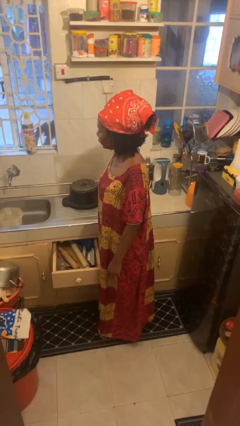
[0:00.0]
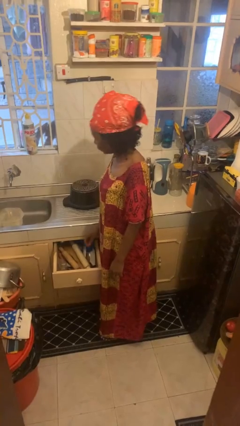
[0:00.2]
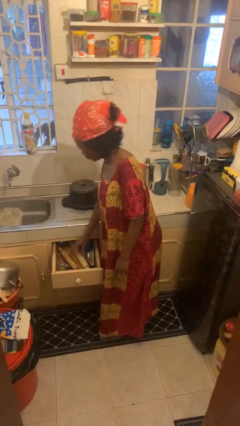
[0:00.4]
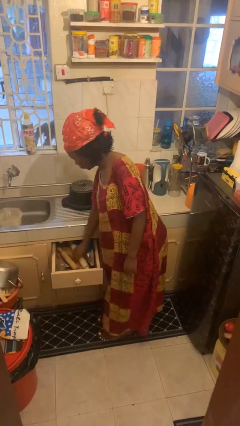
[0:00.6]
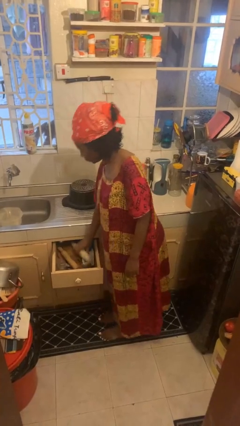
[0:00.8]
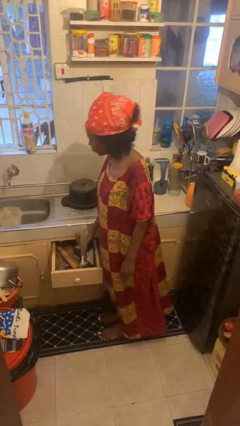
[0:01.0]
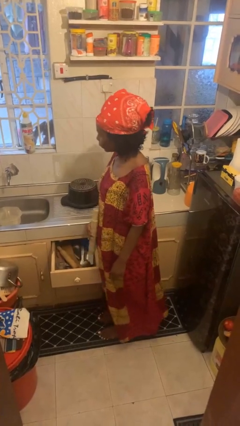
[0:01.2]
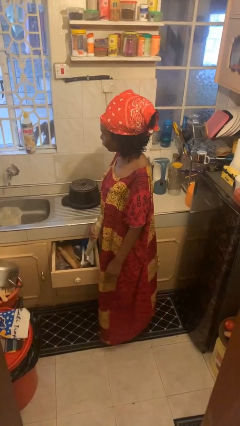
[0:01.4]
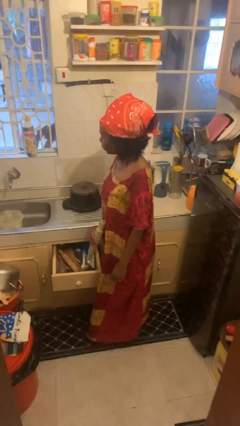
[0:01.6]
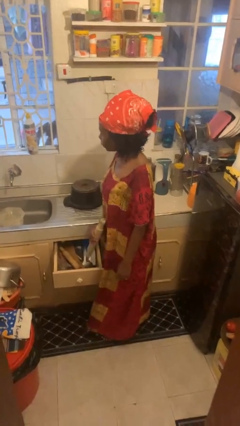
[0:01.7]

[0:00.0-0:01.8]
person takes object from kitchen drawer

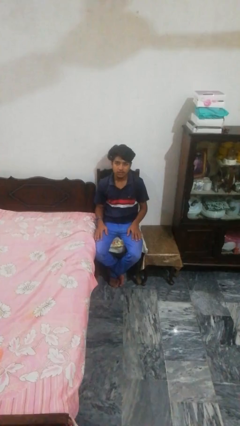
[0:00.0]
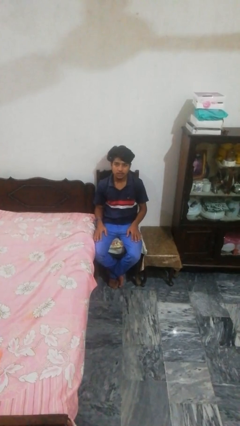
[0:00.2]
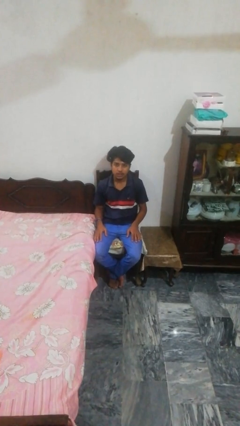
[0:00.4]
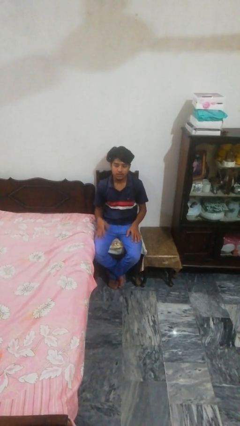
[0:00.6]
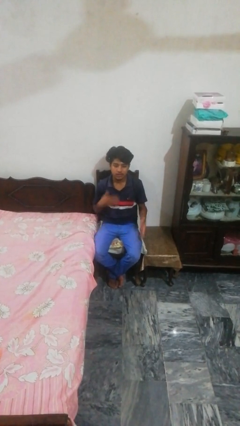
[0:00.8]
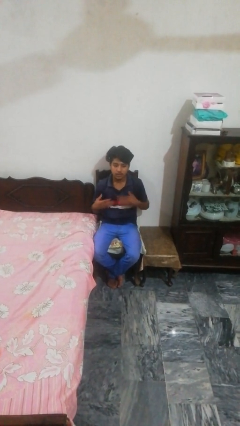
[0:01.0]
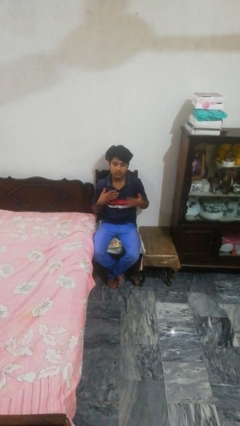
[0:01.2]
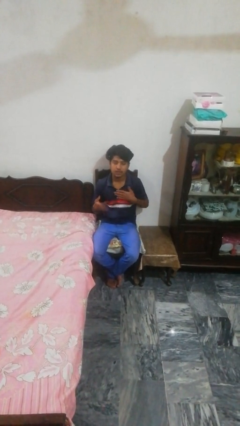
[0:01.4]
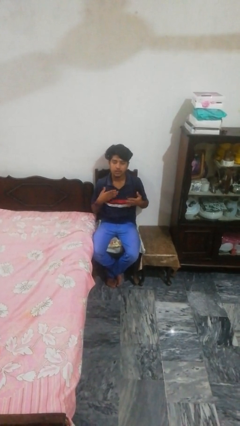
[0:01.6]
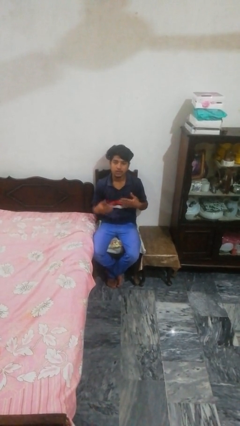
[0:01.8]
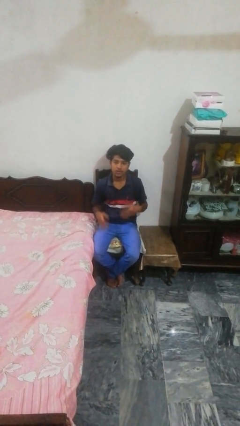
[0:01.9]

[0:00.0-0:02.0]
person drums on chest

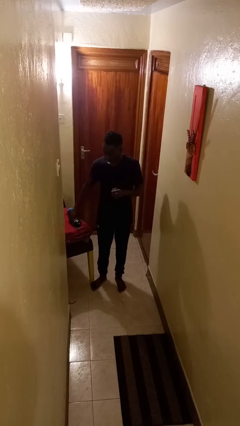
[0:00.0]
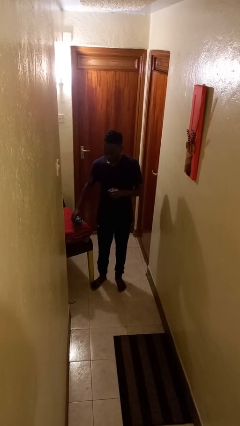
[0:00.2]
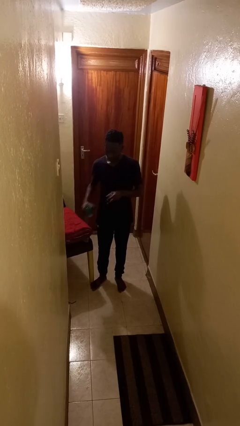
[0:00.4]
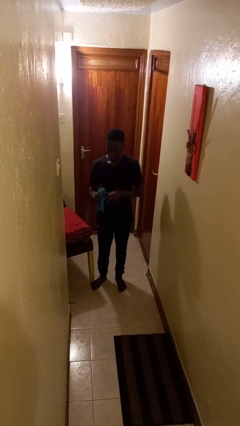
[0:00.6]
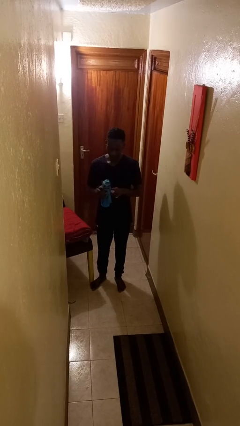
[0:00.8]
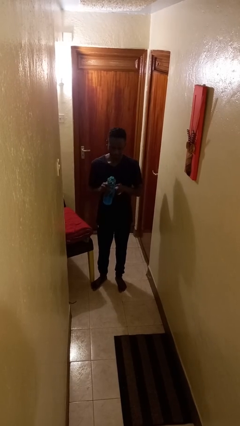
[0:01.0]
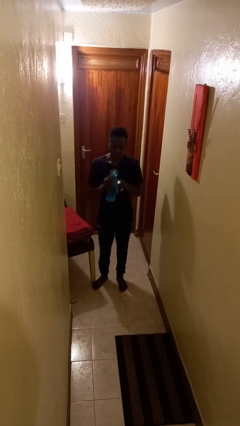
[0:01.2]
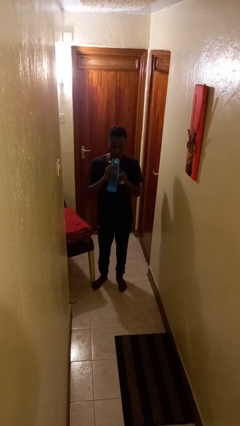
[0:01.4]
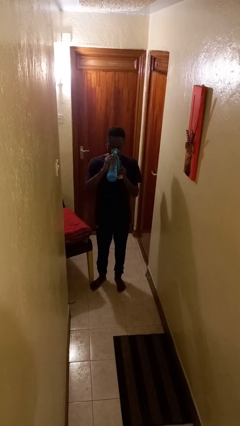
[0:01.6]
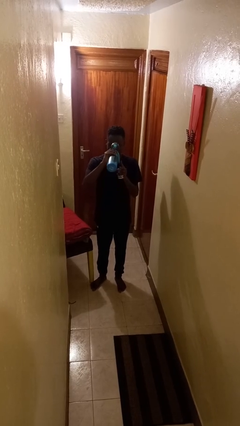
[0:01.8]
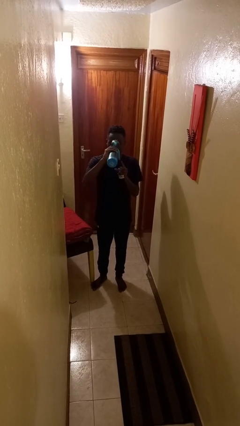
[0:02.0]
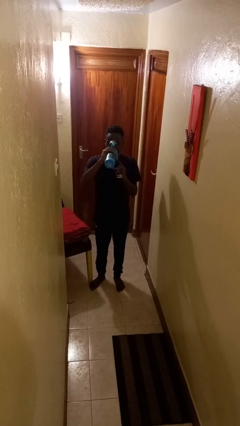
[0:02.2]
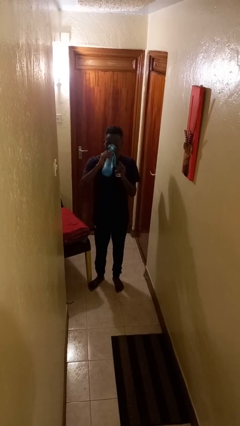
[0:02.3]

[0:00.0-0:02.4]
person drinks from cup

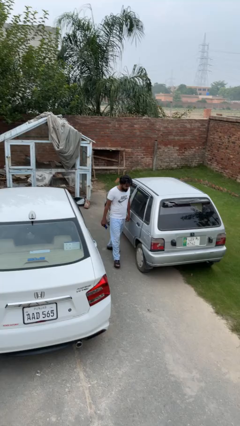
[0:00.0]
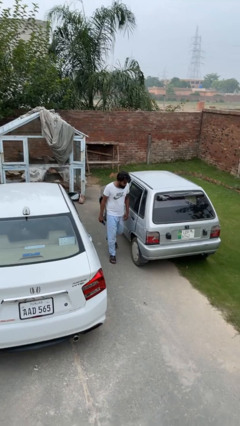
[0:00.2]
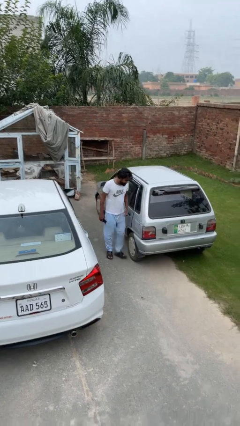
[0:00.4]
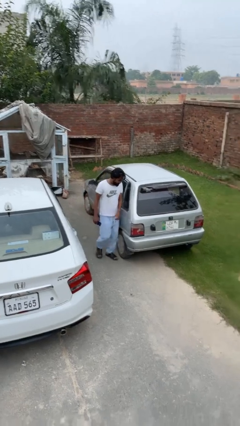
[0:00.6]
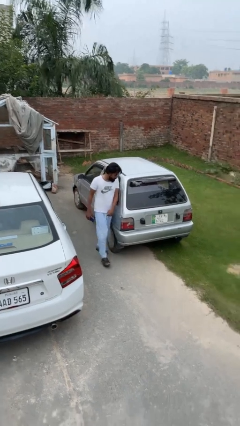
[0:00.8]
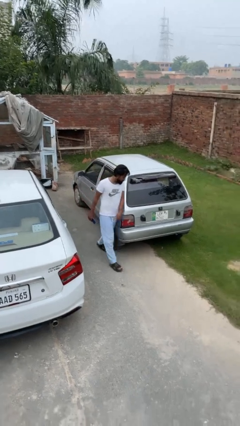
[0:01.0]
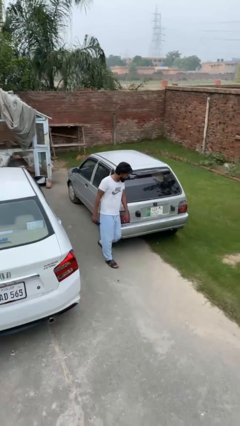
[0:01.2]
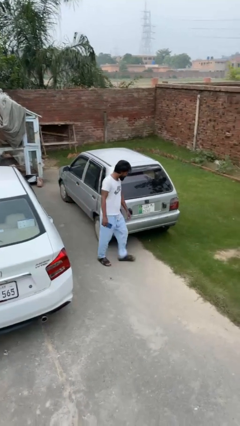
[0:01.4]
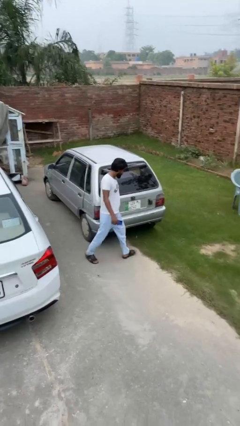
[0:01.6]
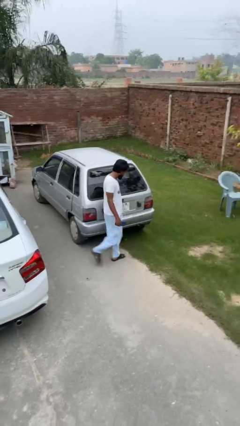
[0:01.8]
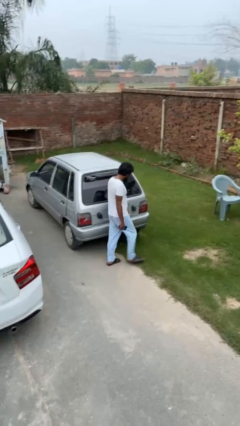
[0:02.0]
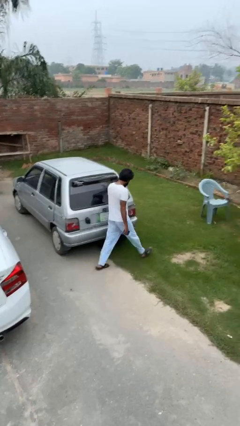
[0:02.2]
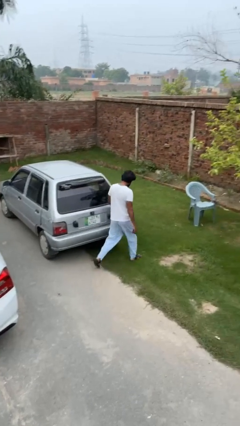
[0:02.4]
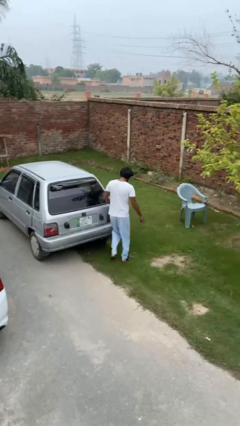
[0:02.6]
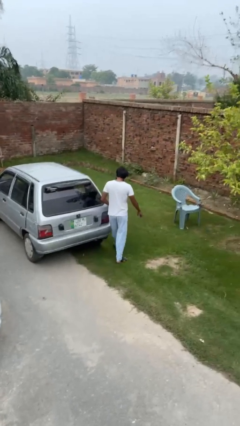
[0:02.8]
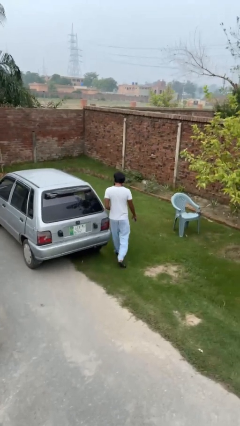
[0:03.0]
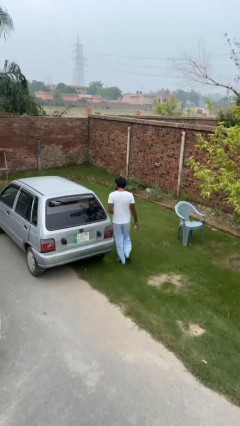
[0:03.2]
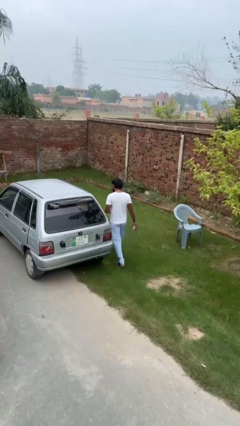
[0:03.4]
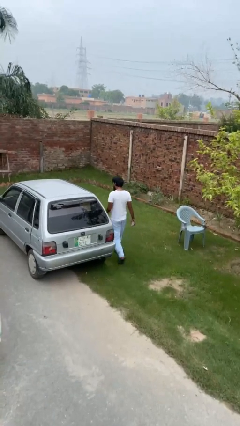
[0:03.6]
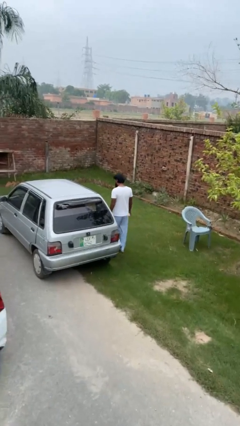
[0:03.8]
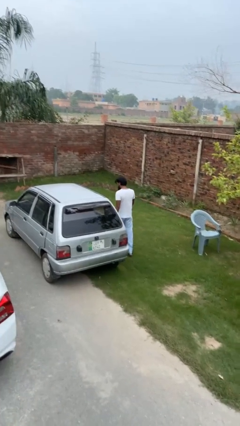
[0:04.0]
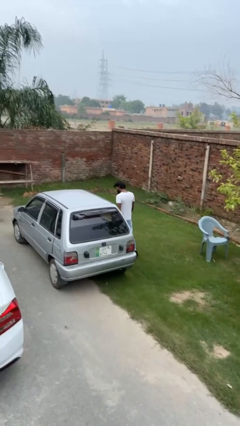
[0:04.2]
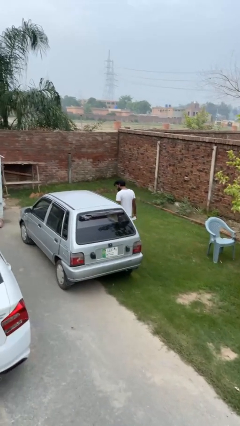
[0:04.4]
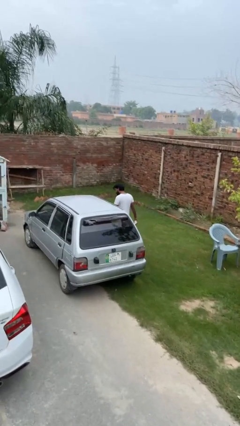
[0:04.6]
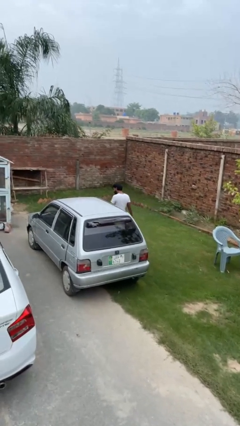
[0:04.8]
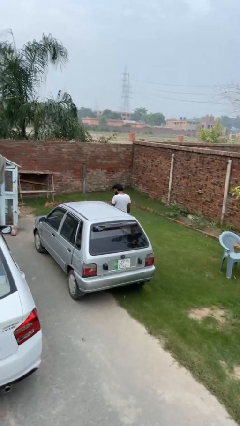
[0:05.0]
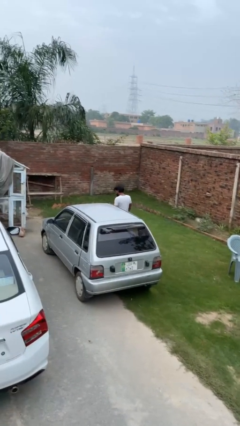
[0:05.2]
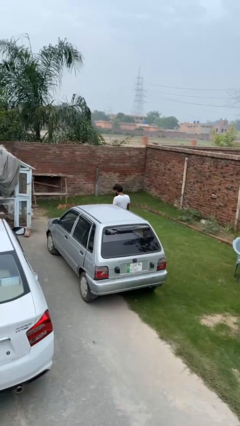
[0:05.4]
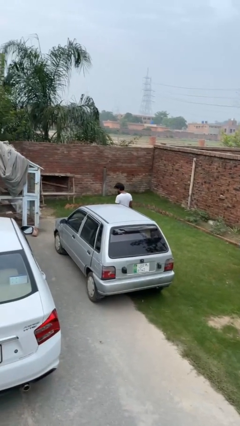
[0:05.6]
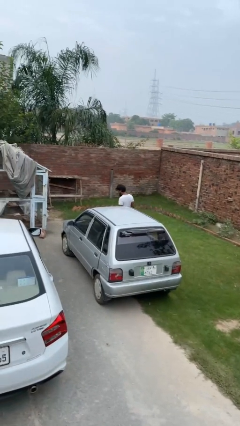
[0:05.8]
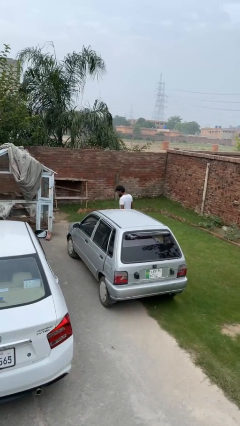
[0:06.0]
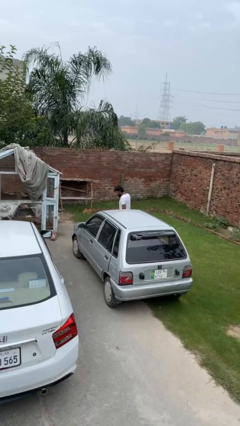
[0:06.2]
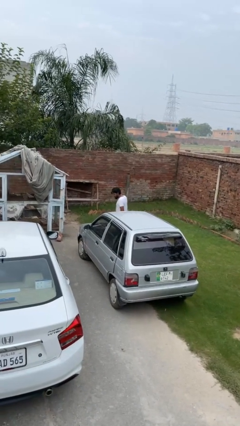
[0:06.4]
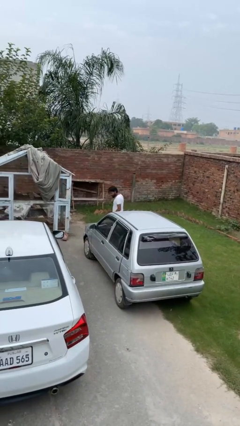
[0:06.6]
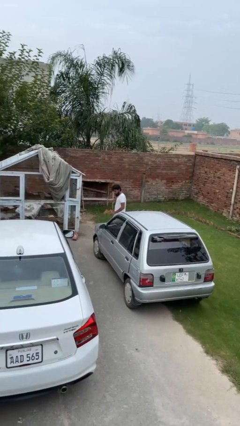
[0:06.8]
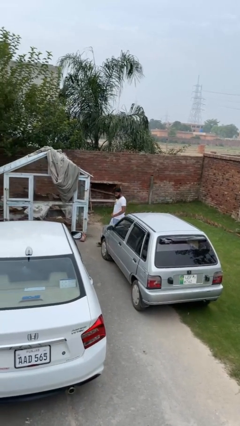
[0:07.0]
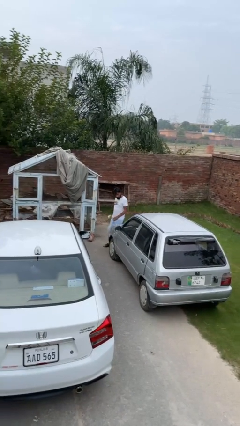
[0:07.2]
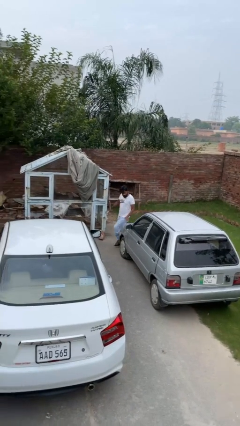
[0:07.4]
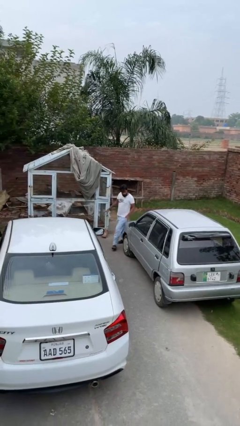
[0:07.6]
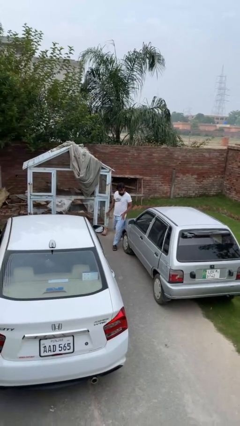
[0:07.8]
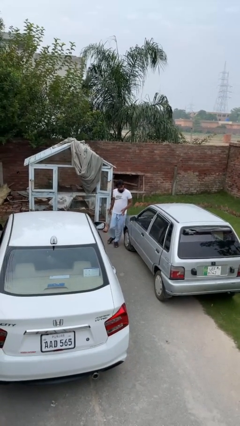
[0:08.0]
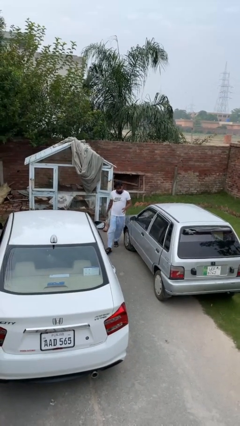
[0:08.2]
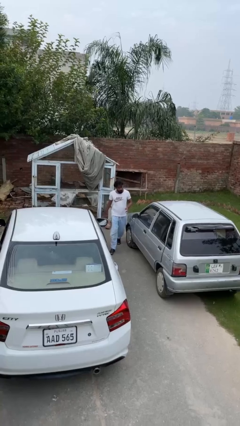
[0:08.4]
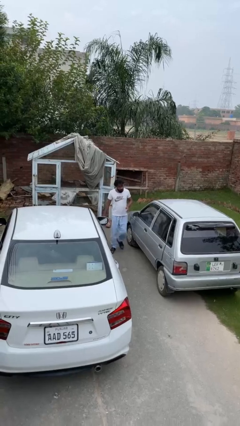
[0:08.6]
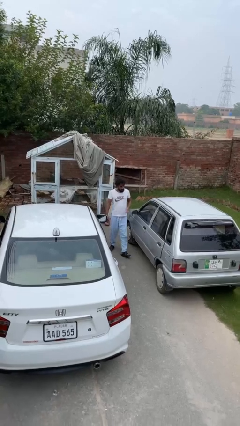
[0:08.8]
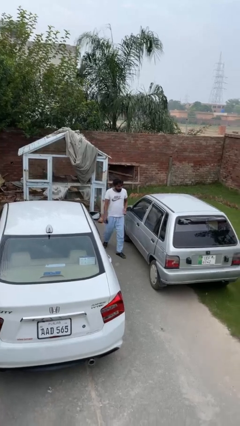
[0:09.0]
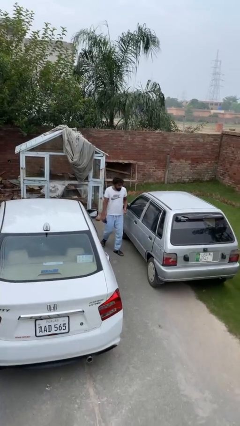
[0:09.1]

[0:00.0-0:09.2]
person walks around car

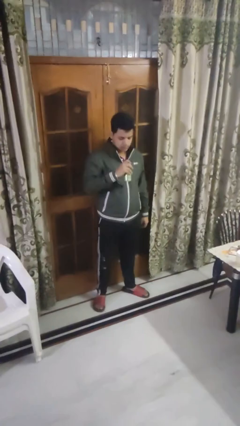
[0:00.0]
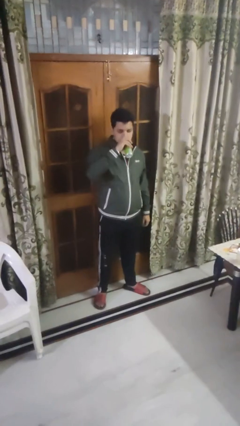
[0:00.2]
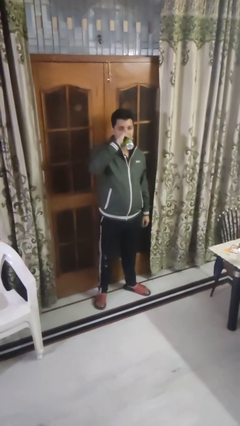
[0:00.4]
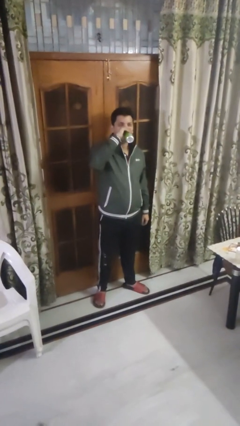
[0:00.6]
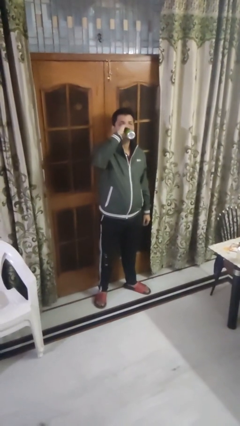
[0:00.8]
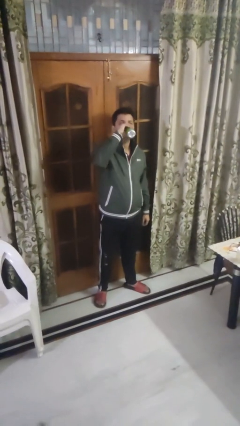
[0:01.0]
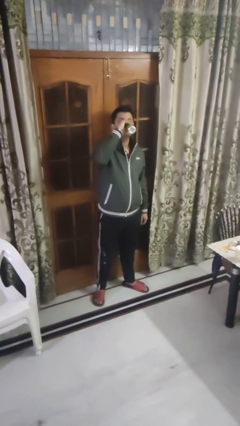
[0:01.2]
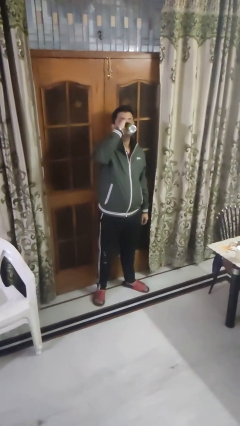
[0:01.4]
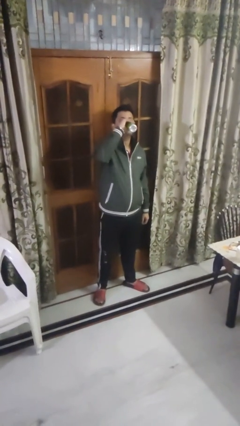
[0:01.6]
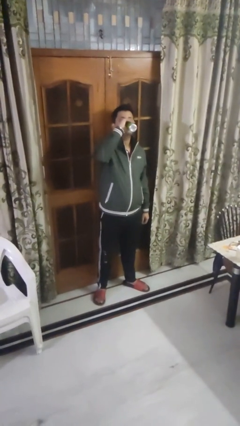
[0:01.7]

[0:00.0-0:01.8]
person drinks from beverage can

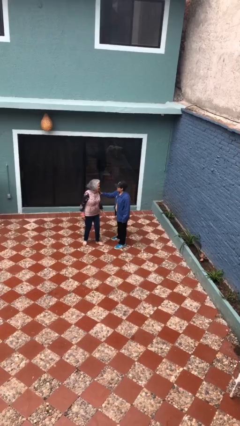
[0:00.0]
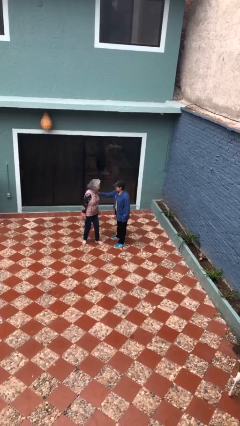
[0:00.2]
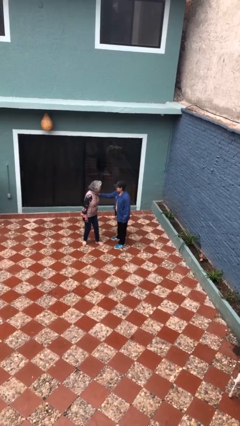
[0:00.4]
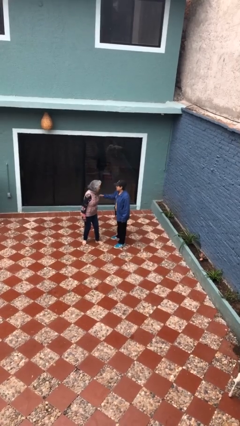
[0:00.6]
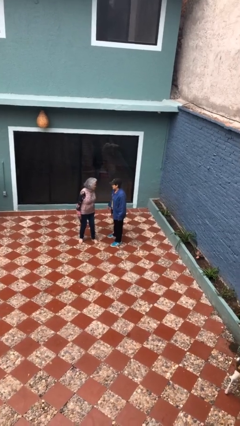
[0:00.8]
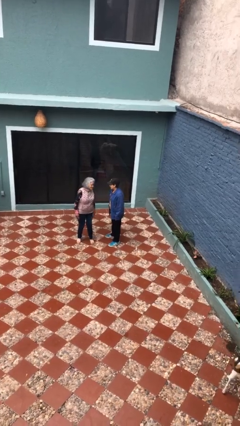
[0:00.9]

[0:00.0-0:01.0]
person spins person around
